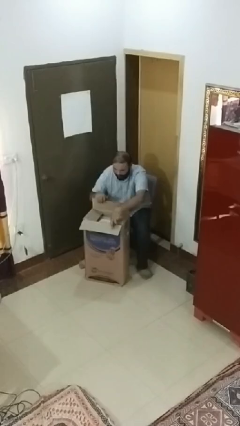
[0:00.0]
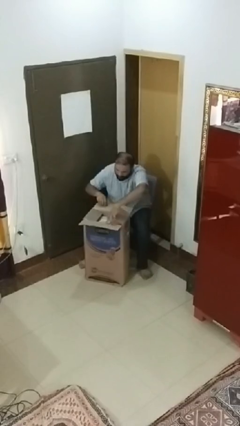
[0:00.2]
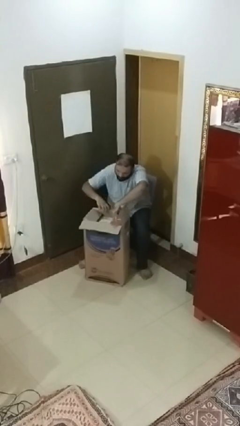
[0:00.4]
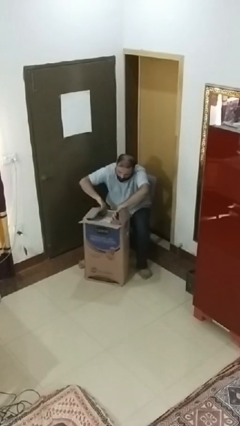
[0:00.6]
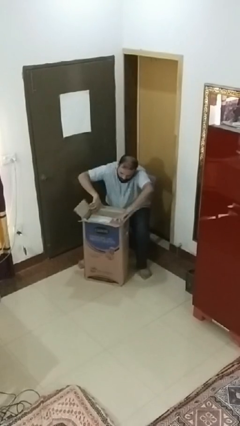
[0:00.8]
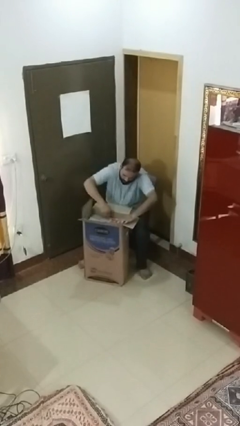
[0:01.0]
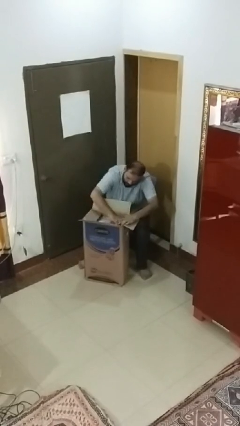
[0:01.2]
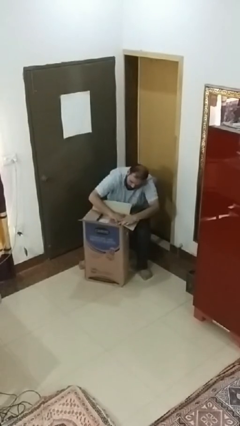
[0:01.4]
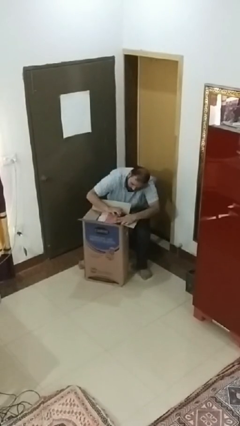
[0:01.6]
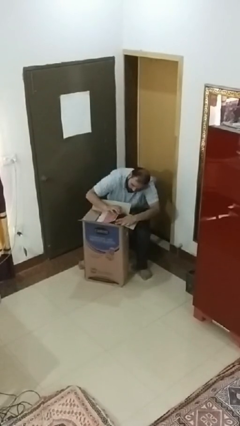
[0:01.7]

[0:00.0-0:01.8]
person searches in box

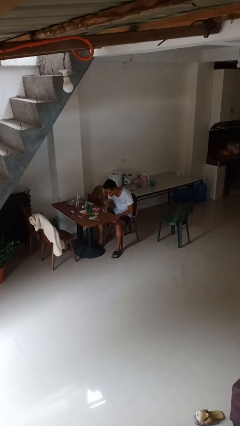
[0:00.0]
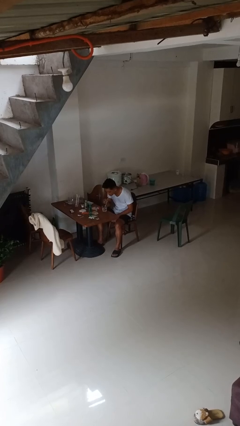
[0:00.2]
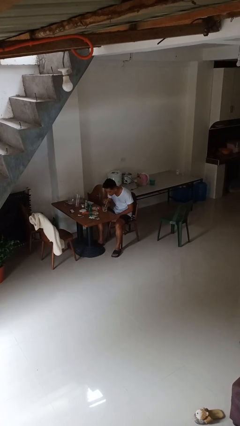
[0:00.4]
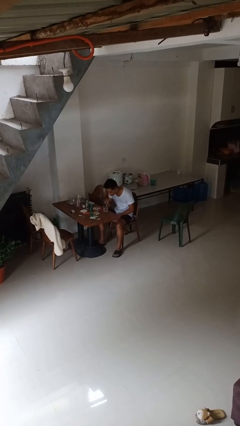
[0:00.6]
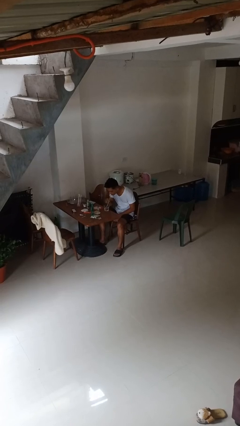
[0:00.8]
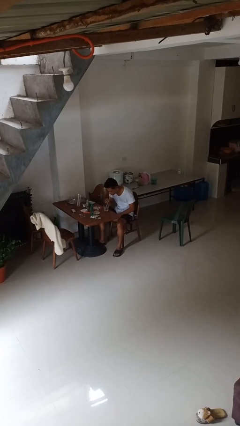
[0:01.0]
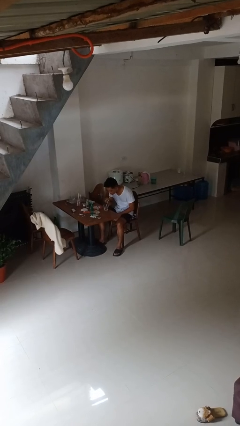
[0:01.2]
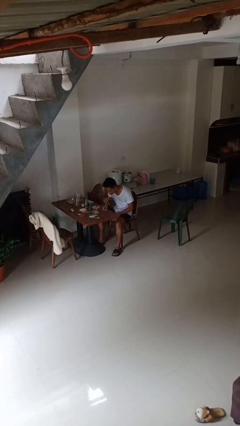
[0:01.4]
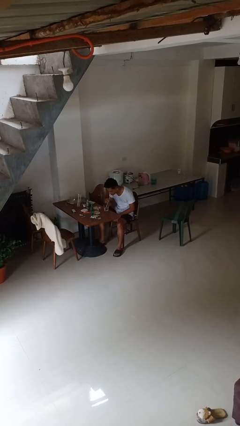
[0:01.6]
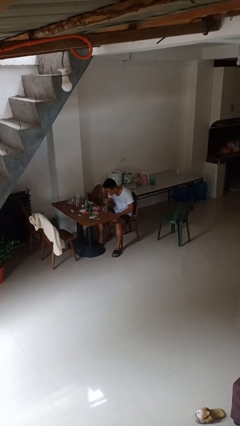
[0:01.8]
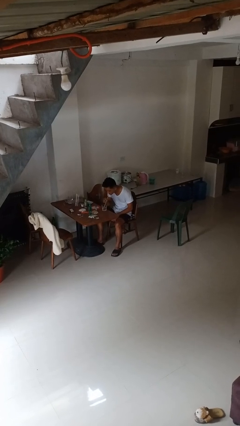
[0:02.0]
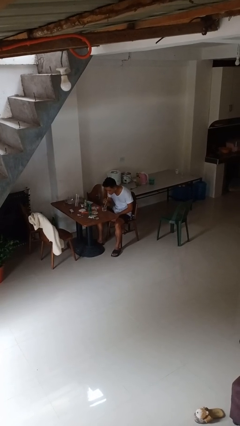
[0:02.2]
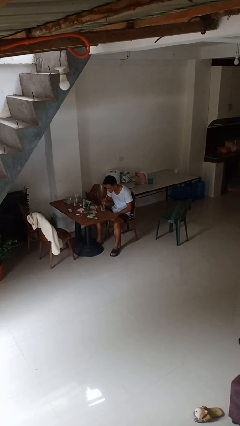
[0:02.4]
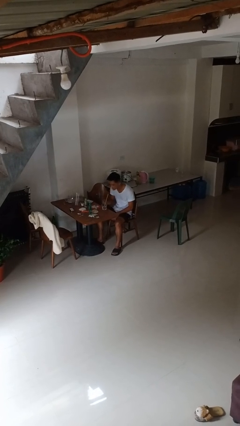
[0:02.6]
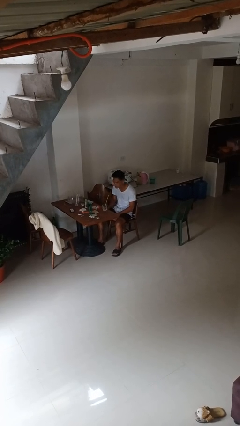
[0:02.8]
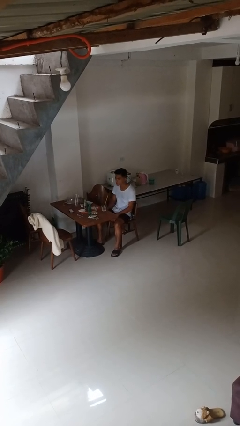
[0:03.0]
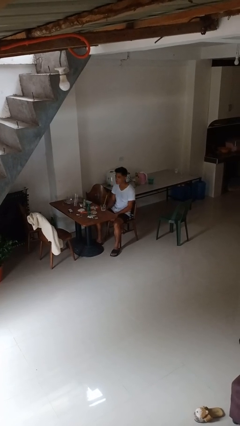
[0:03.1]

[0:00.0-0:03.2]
person drinks from straw

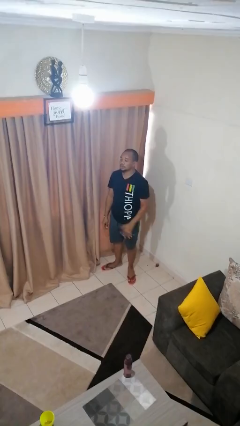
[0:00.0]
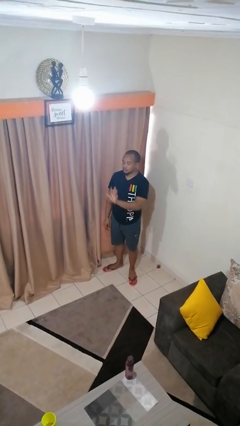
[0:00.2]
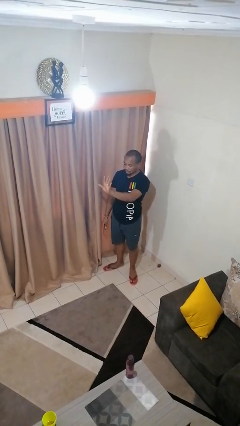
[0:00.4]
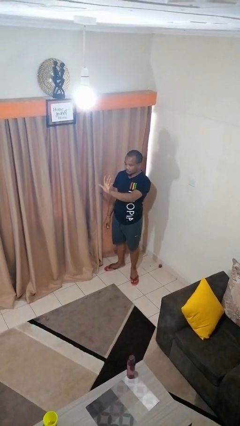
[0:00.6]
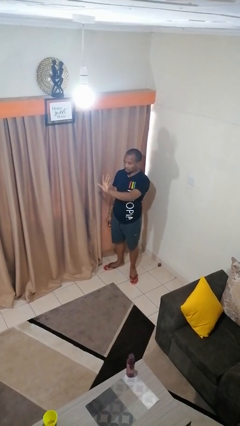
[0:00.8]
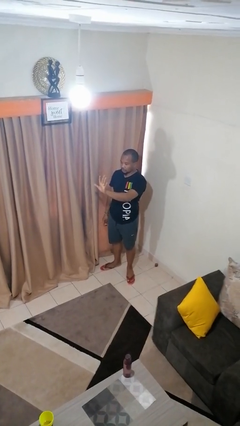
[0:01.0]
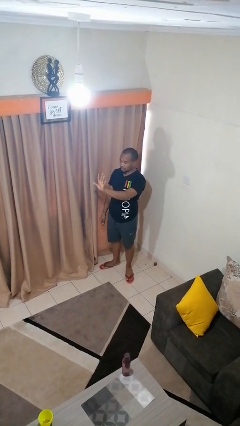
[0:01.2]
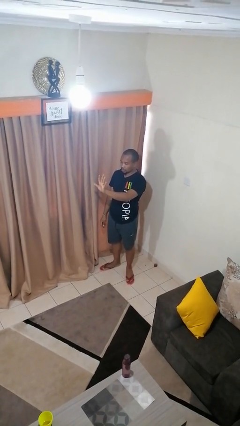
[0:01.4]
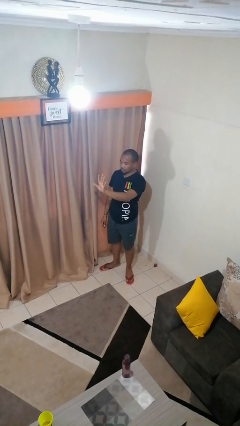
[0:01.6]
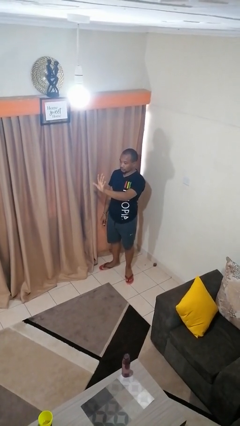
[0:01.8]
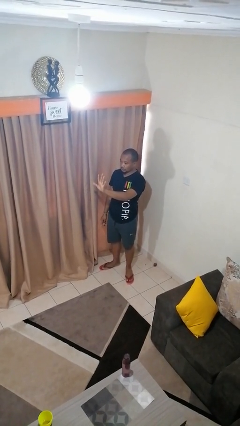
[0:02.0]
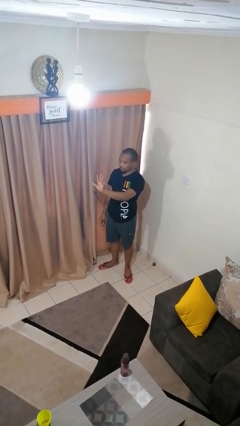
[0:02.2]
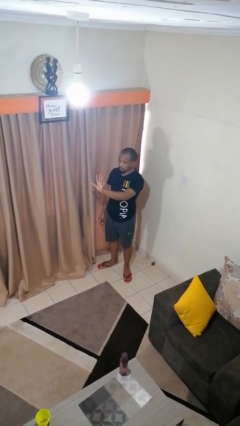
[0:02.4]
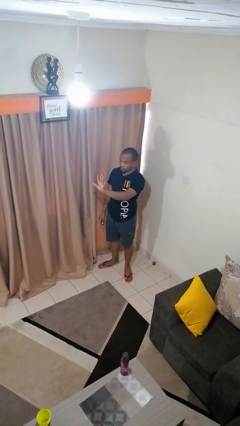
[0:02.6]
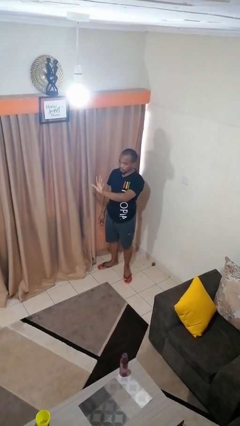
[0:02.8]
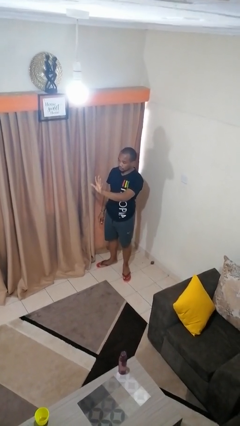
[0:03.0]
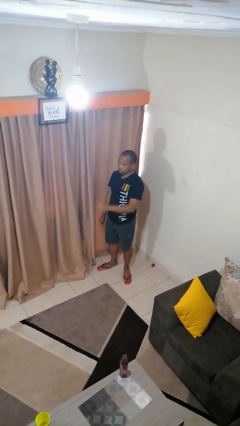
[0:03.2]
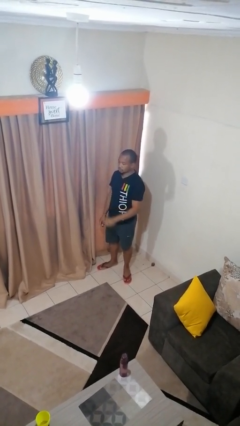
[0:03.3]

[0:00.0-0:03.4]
person gestures number five

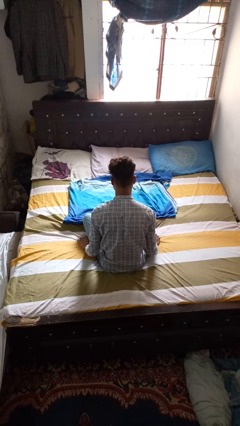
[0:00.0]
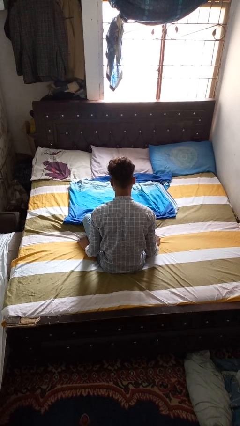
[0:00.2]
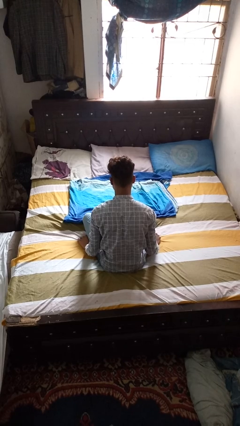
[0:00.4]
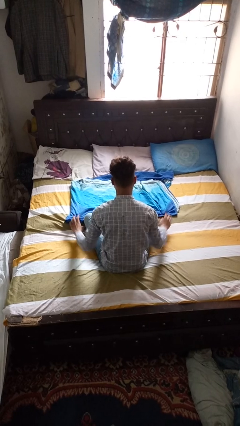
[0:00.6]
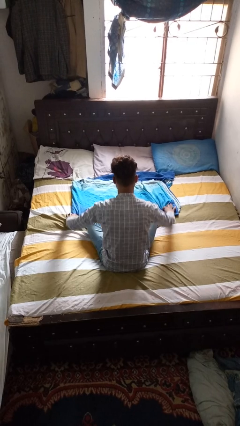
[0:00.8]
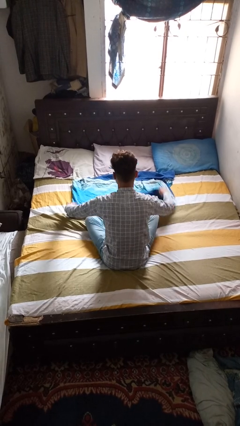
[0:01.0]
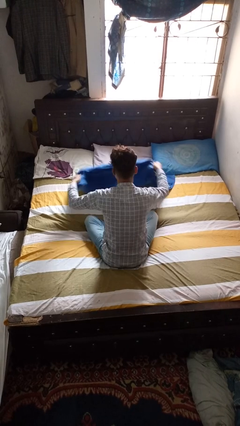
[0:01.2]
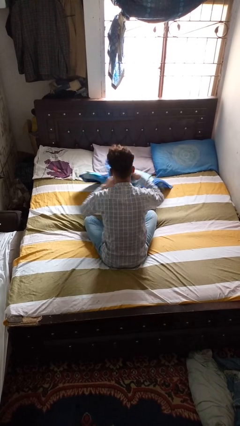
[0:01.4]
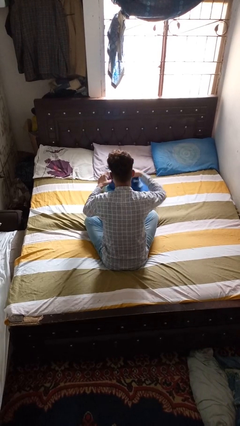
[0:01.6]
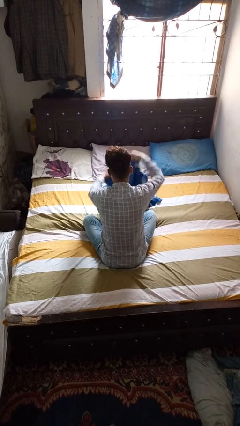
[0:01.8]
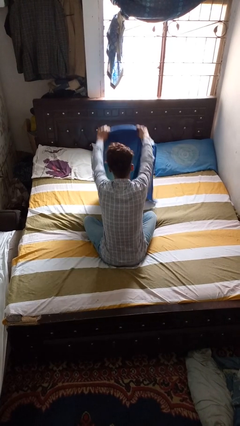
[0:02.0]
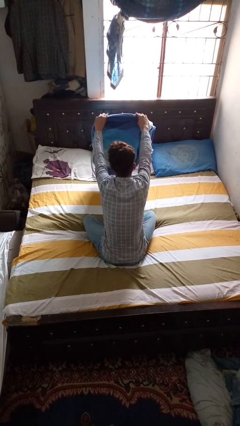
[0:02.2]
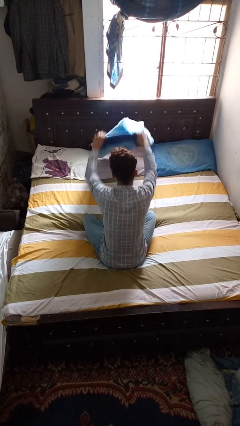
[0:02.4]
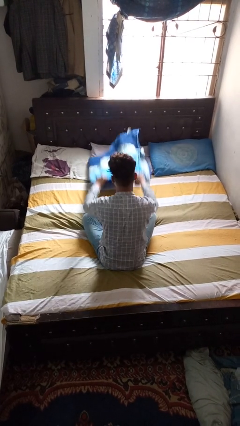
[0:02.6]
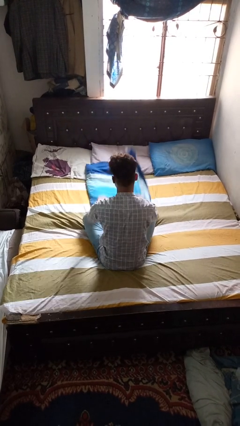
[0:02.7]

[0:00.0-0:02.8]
person folds blanket

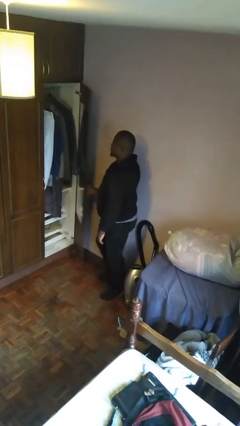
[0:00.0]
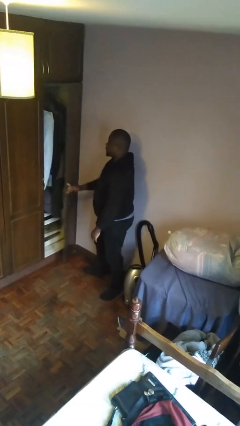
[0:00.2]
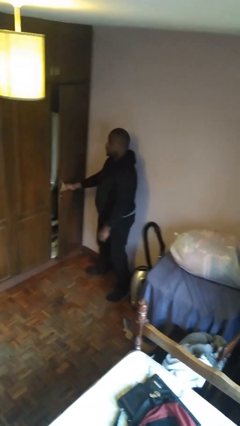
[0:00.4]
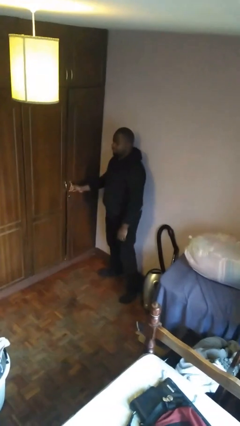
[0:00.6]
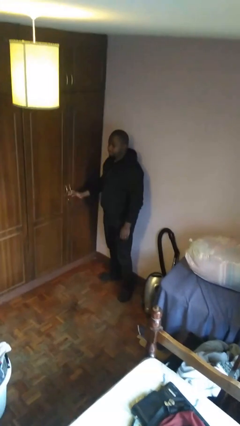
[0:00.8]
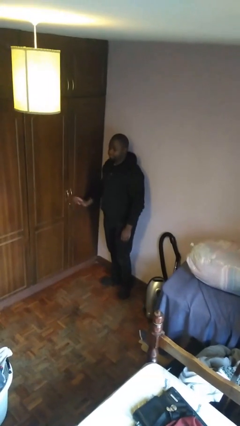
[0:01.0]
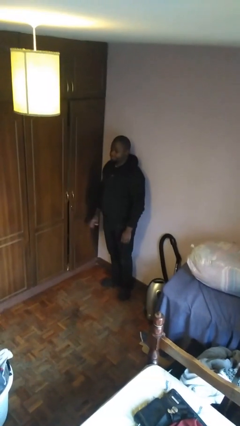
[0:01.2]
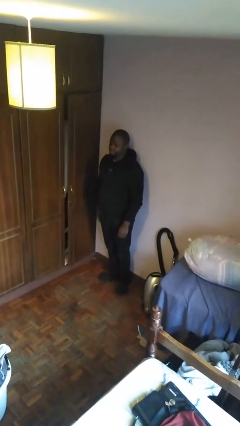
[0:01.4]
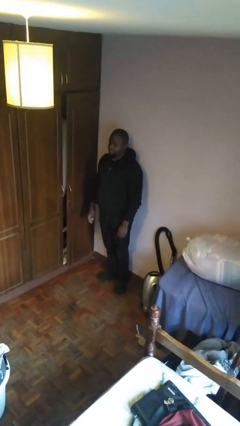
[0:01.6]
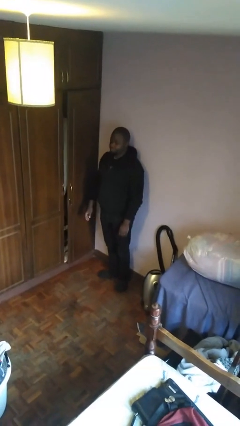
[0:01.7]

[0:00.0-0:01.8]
person closes closet door

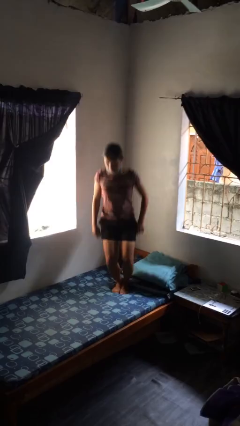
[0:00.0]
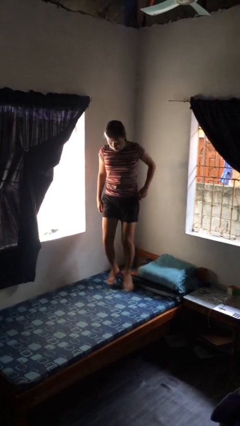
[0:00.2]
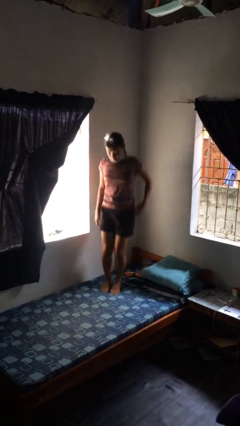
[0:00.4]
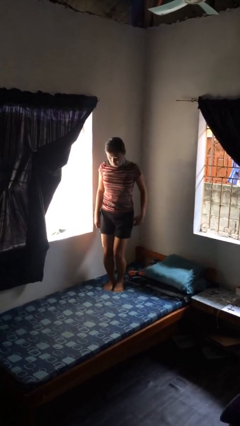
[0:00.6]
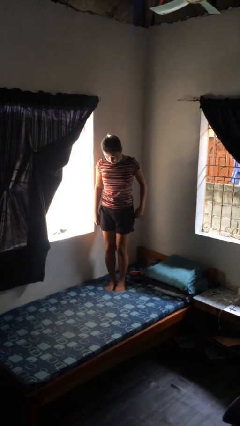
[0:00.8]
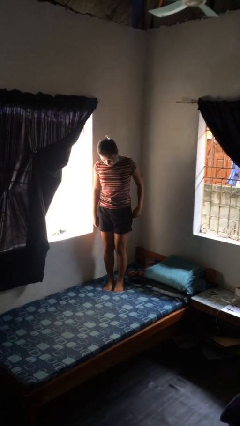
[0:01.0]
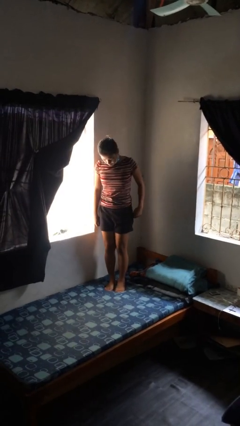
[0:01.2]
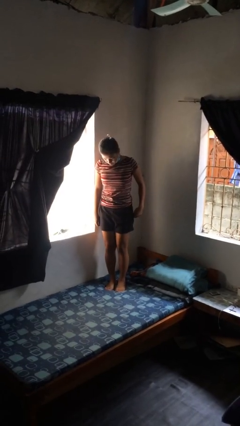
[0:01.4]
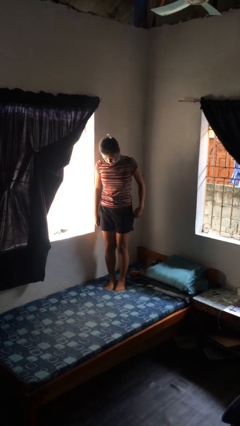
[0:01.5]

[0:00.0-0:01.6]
person jumps on bed

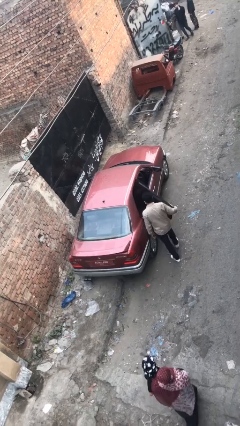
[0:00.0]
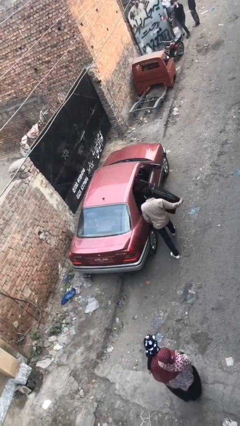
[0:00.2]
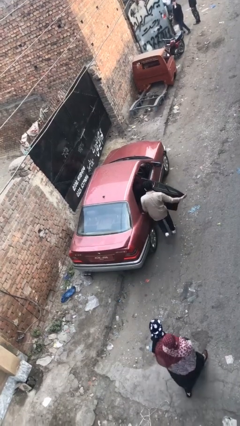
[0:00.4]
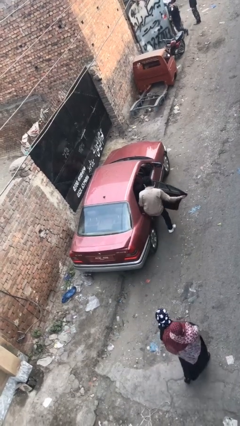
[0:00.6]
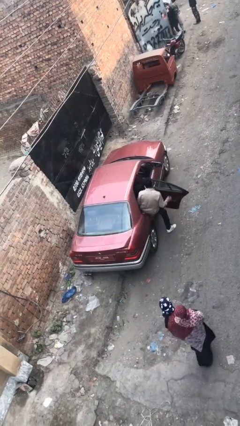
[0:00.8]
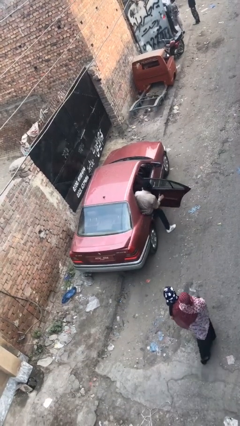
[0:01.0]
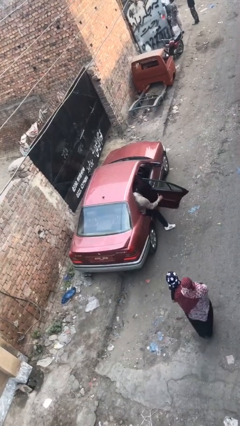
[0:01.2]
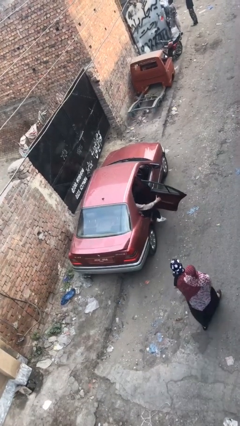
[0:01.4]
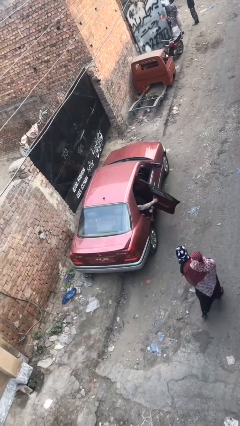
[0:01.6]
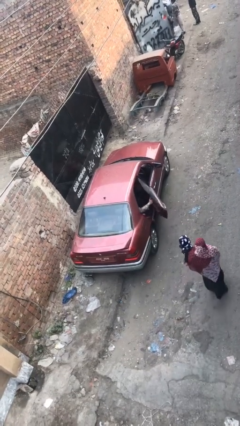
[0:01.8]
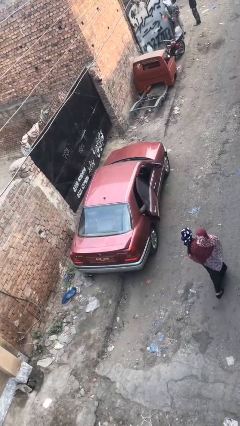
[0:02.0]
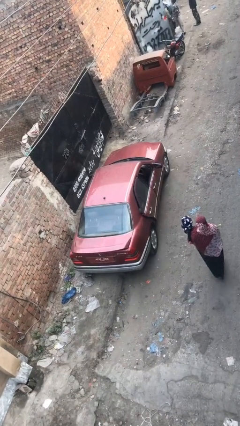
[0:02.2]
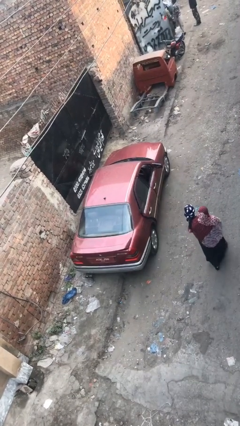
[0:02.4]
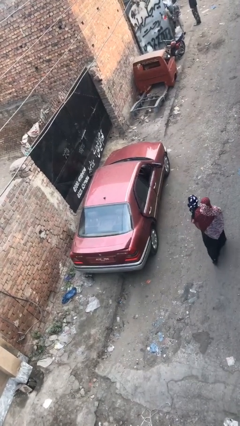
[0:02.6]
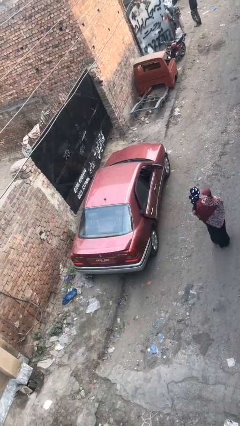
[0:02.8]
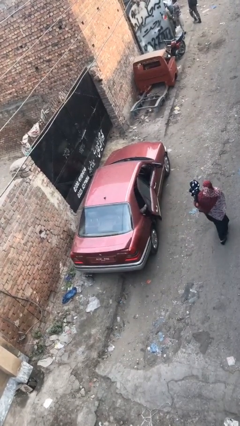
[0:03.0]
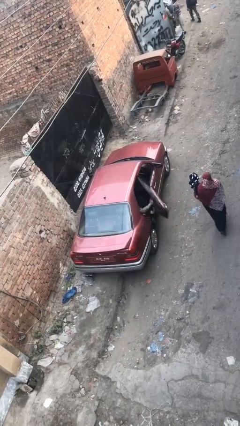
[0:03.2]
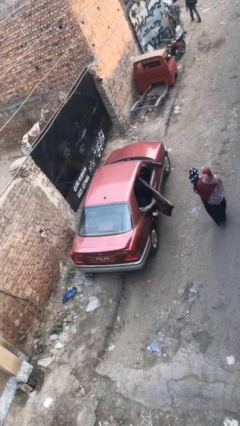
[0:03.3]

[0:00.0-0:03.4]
car picks up person
